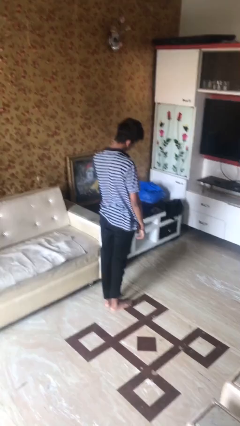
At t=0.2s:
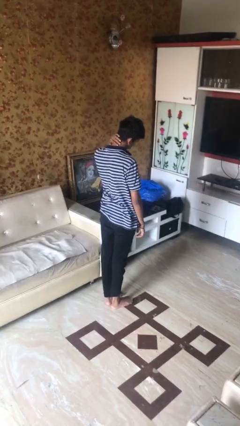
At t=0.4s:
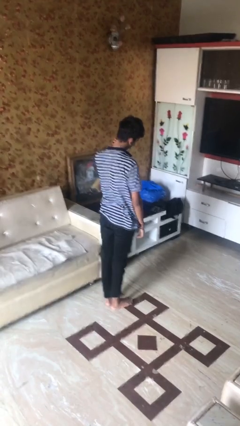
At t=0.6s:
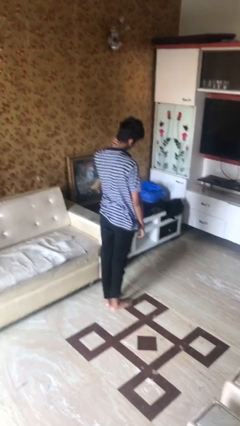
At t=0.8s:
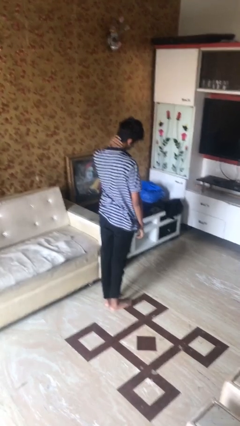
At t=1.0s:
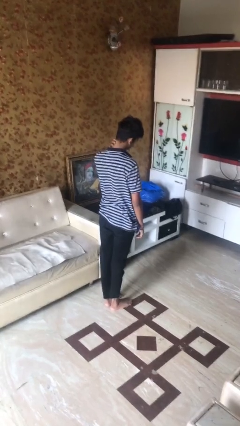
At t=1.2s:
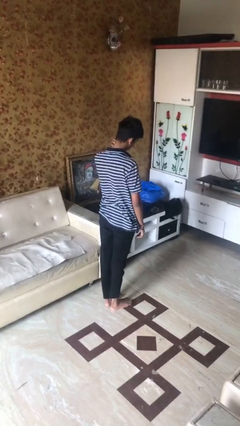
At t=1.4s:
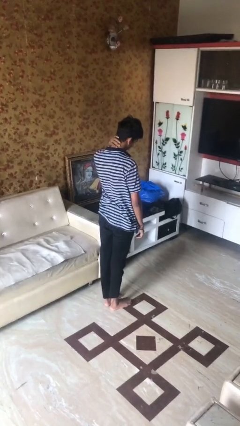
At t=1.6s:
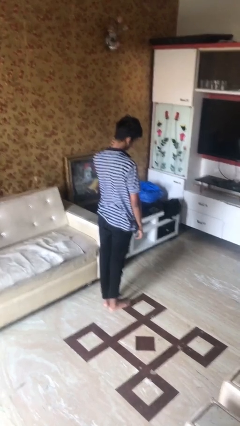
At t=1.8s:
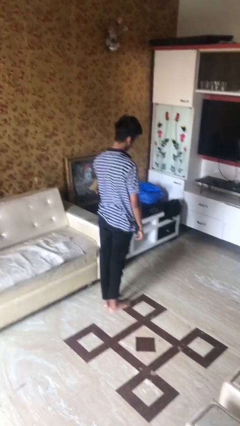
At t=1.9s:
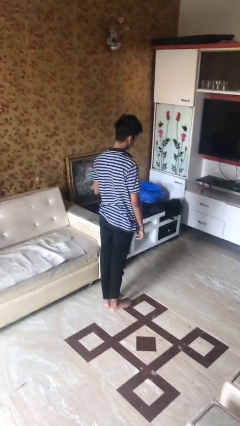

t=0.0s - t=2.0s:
person rubs neck

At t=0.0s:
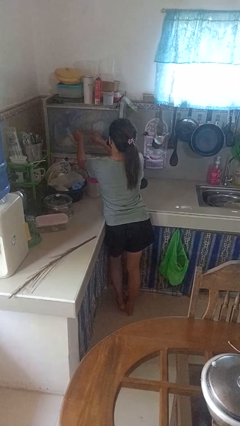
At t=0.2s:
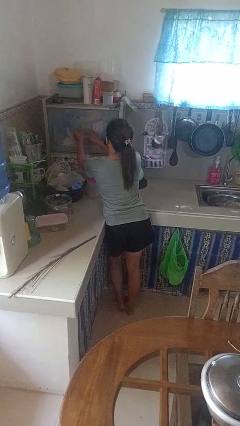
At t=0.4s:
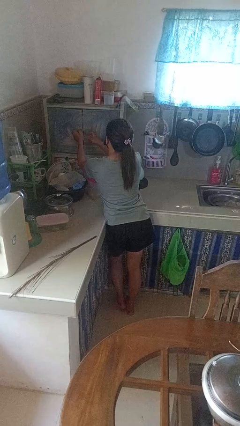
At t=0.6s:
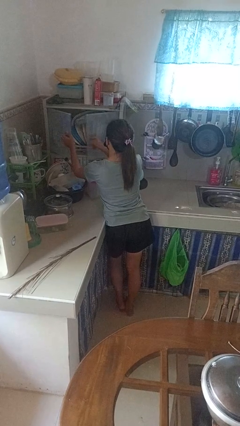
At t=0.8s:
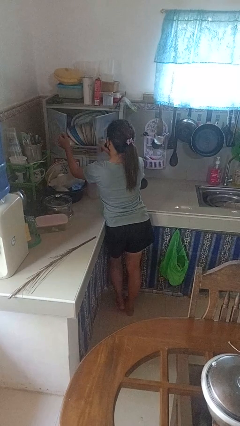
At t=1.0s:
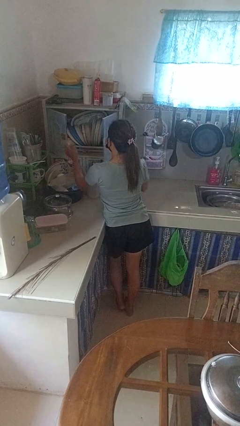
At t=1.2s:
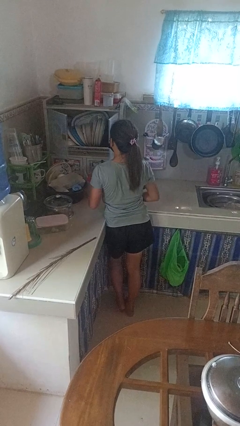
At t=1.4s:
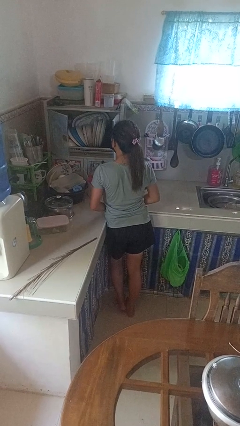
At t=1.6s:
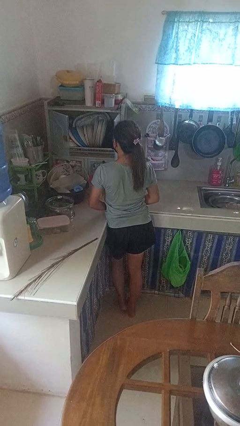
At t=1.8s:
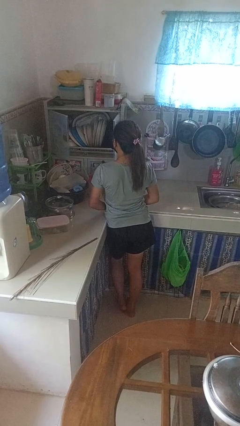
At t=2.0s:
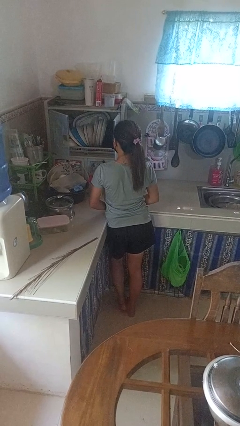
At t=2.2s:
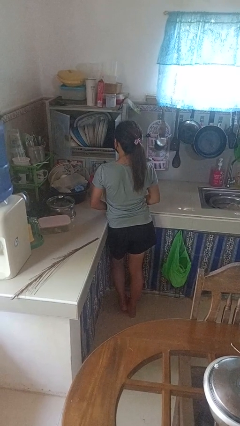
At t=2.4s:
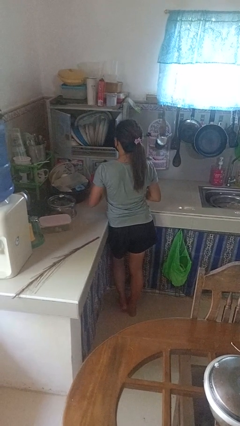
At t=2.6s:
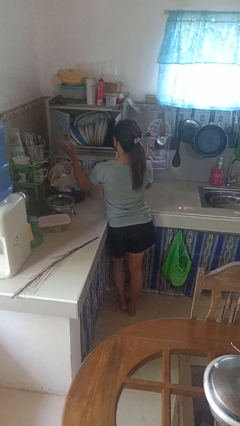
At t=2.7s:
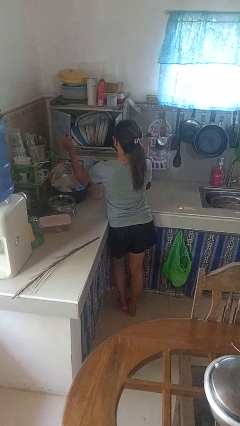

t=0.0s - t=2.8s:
person opens clothes washer

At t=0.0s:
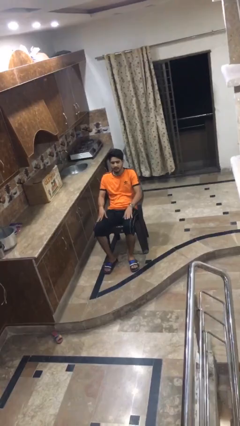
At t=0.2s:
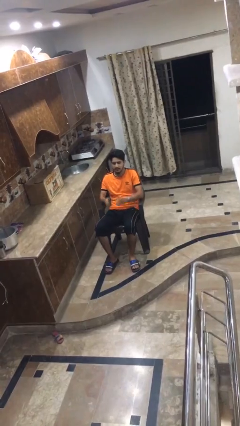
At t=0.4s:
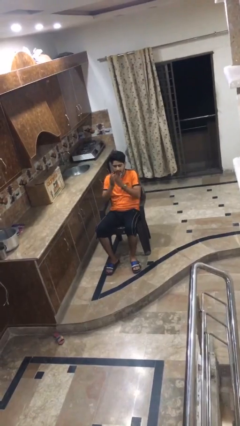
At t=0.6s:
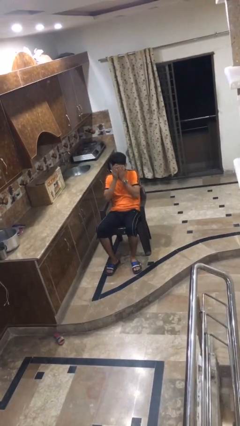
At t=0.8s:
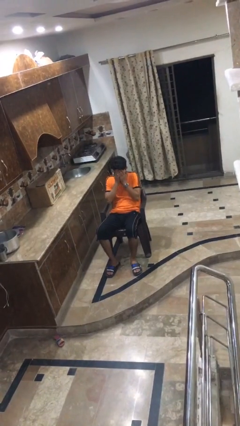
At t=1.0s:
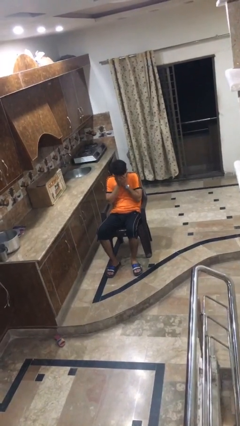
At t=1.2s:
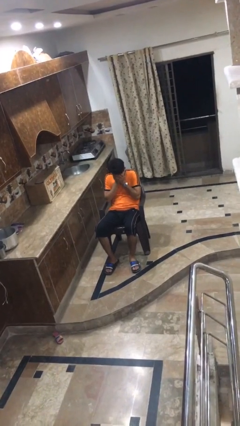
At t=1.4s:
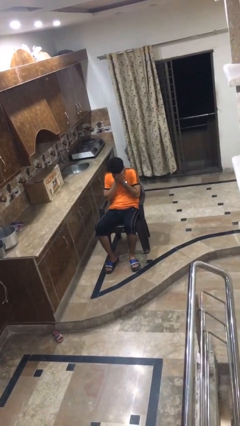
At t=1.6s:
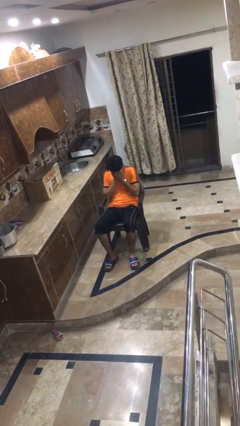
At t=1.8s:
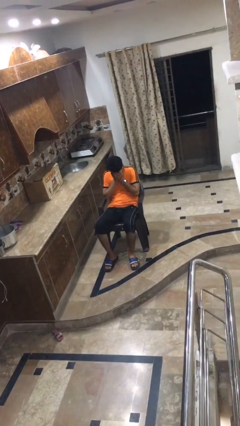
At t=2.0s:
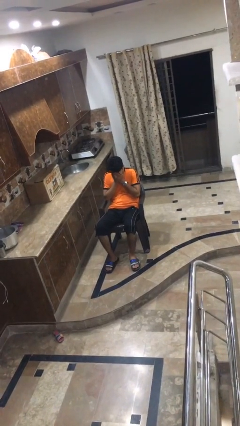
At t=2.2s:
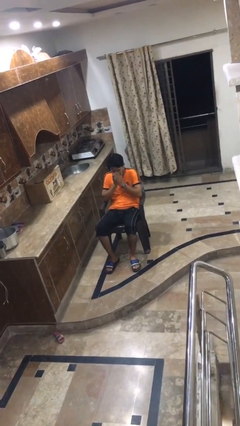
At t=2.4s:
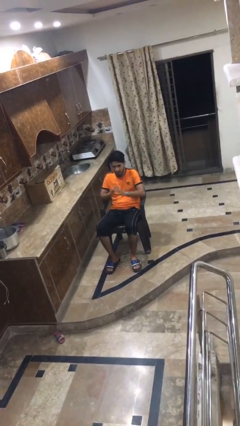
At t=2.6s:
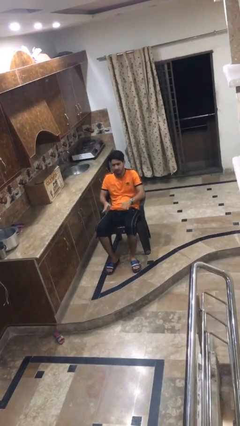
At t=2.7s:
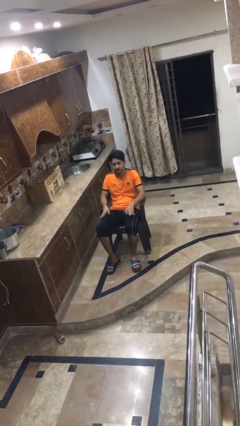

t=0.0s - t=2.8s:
person covers face with hands

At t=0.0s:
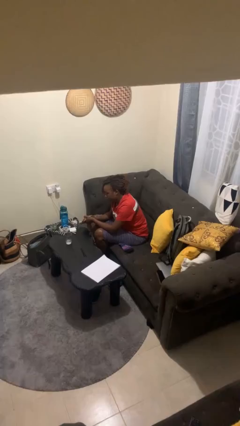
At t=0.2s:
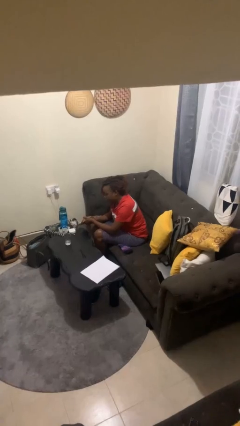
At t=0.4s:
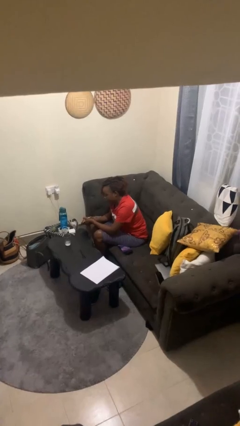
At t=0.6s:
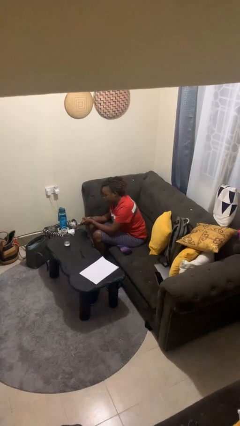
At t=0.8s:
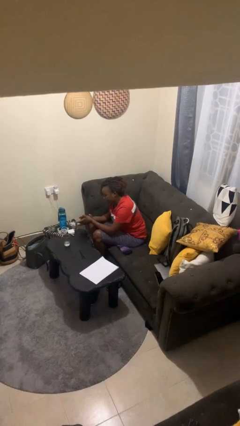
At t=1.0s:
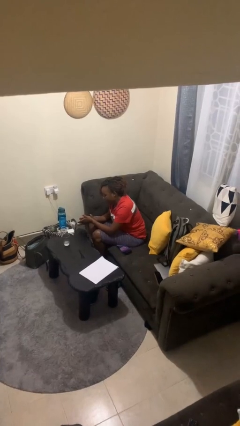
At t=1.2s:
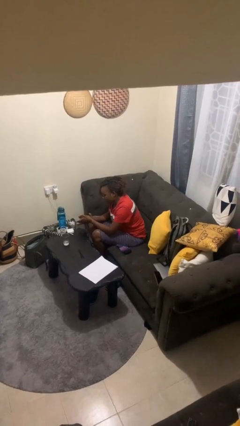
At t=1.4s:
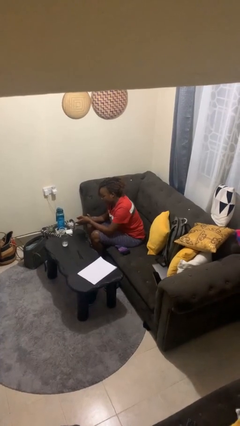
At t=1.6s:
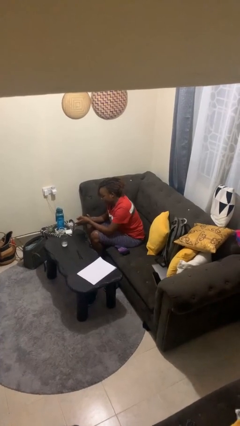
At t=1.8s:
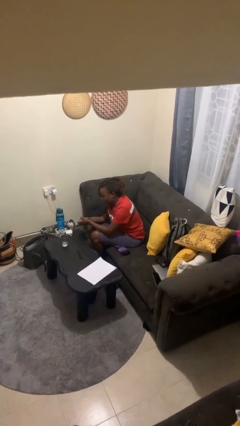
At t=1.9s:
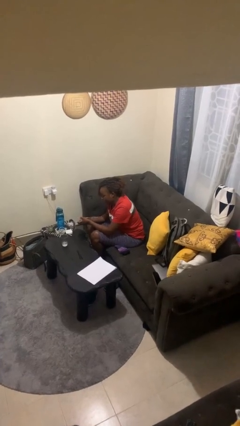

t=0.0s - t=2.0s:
person claps hands

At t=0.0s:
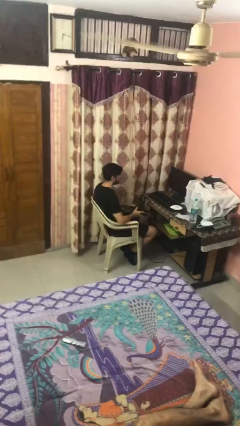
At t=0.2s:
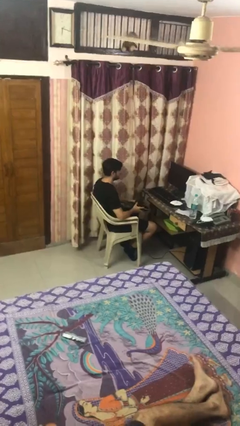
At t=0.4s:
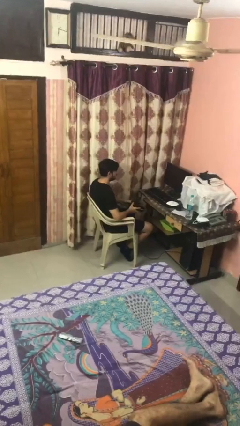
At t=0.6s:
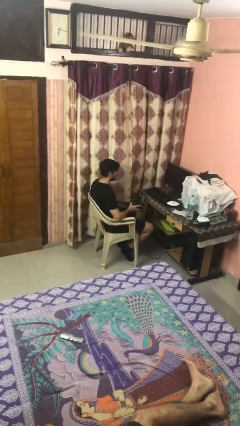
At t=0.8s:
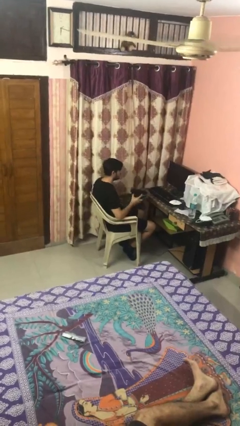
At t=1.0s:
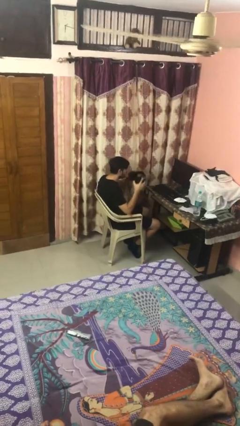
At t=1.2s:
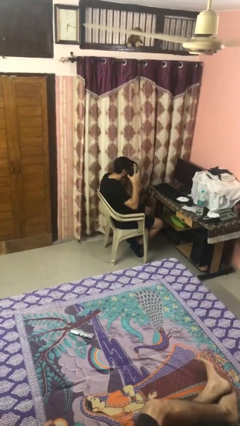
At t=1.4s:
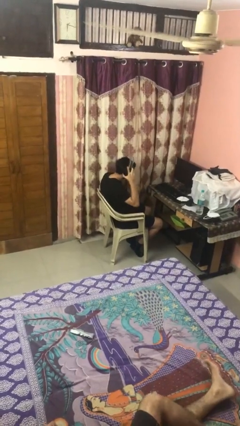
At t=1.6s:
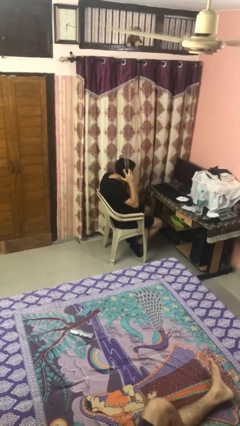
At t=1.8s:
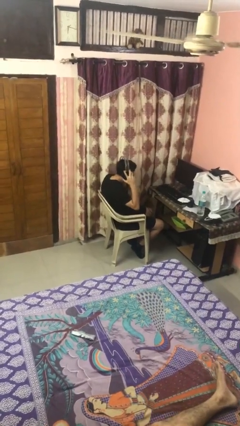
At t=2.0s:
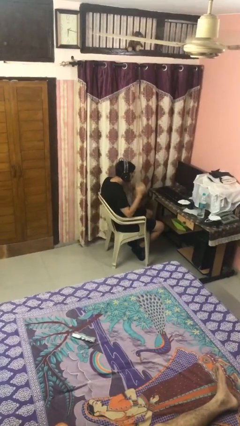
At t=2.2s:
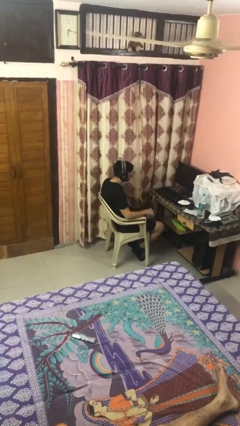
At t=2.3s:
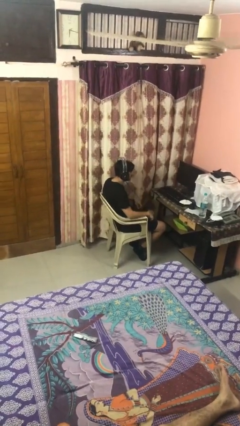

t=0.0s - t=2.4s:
person puts on headphones

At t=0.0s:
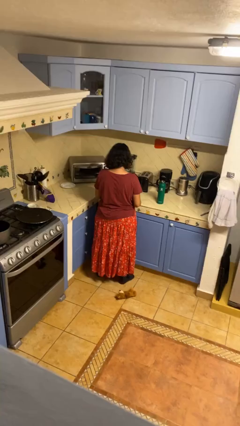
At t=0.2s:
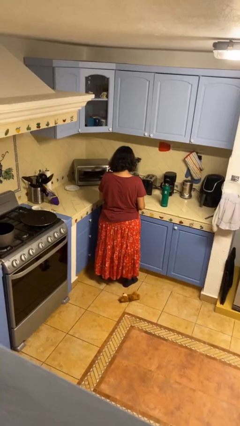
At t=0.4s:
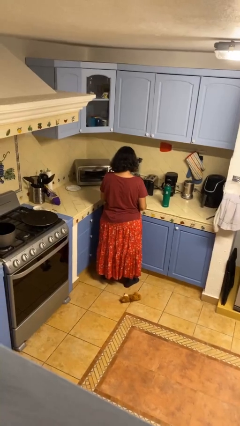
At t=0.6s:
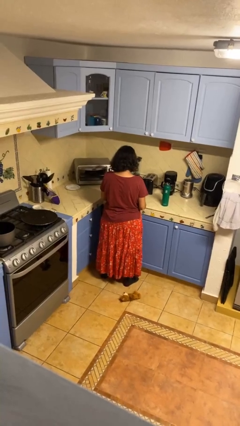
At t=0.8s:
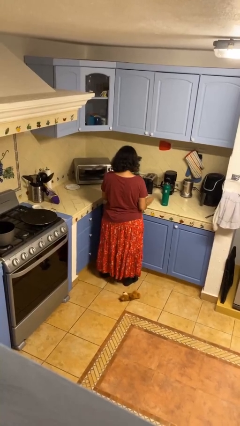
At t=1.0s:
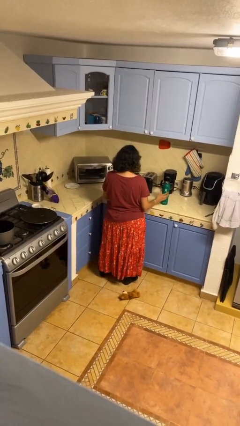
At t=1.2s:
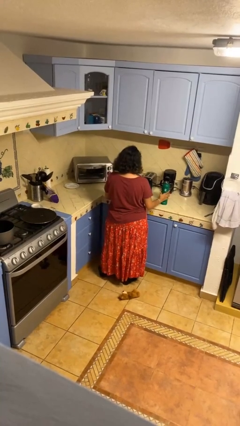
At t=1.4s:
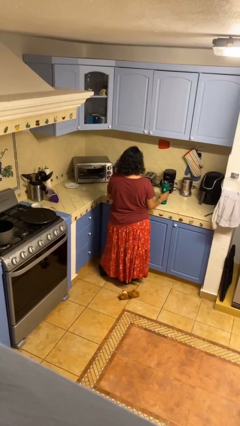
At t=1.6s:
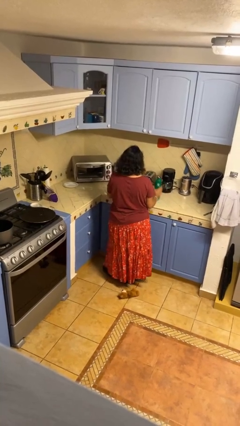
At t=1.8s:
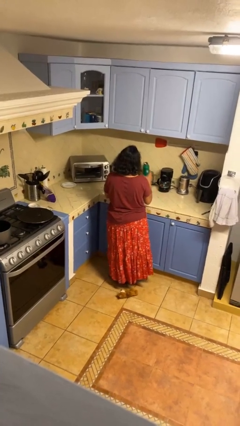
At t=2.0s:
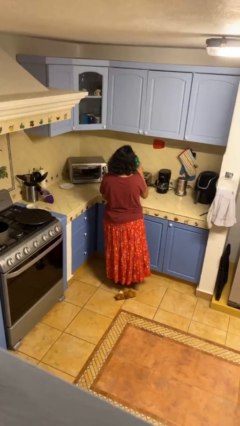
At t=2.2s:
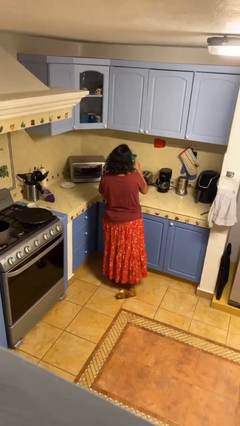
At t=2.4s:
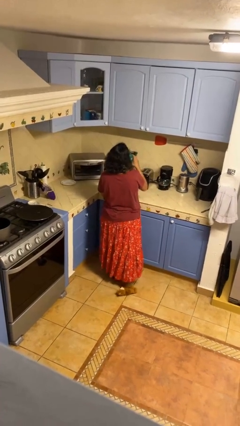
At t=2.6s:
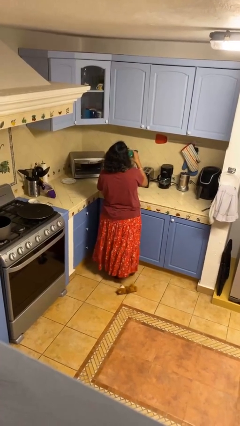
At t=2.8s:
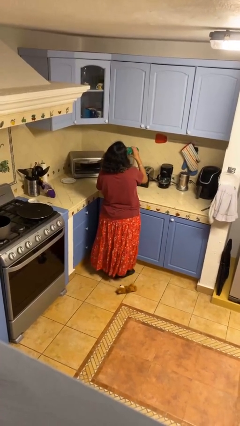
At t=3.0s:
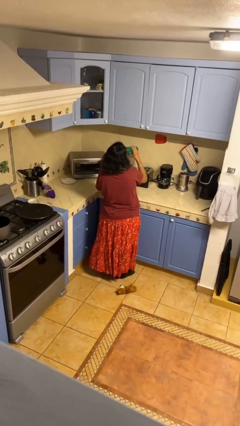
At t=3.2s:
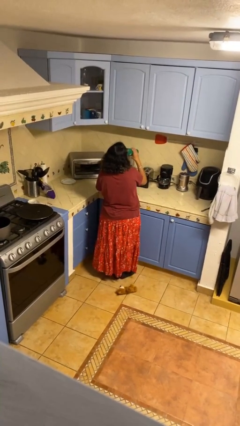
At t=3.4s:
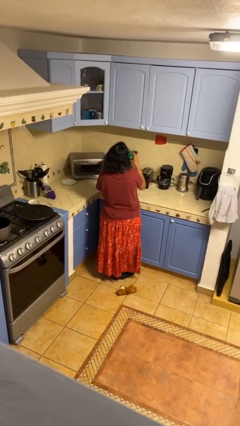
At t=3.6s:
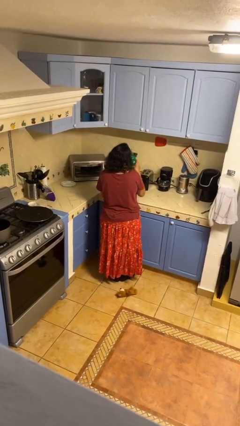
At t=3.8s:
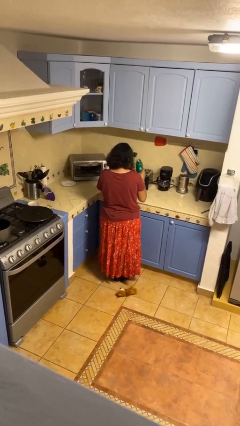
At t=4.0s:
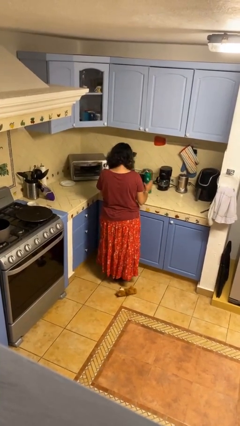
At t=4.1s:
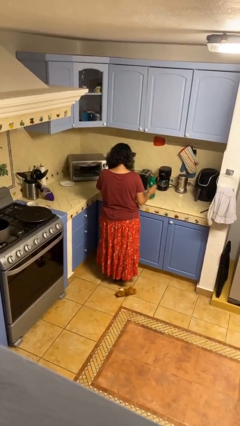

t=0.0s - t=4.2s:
person drinks from bottle

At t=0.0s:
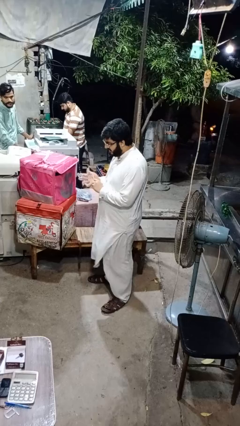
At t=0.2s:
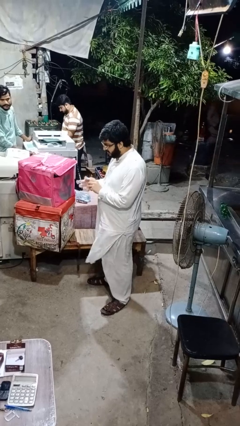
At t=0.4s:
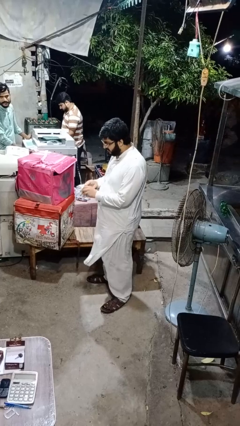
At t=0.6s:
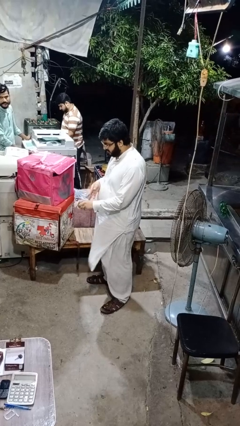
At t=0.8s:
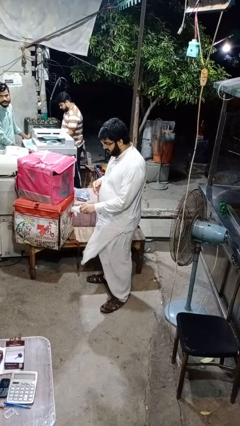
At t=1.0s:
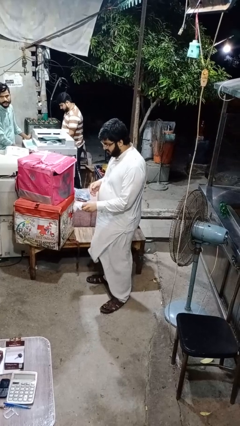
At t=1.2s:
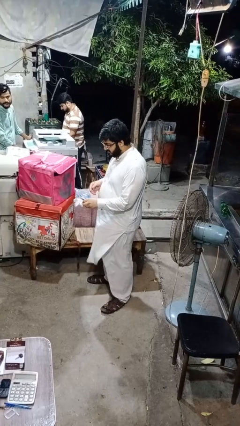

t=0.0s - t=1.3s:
person takes off gloves
